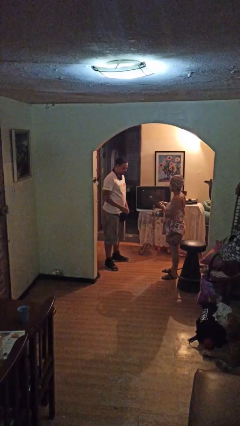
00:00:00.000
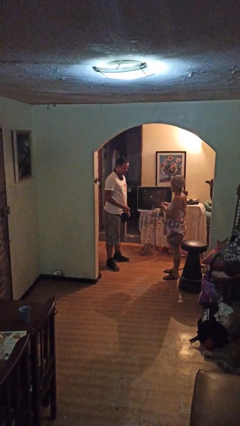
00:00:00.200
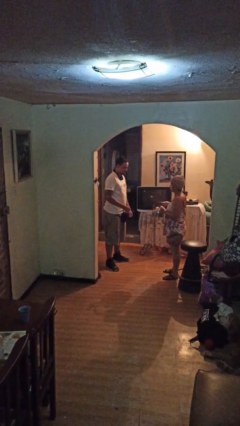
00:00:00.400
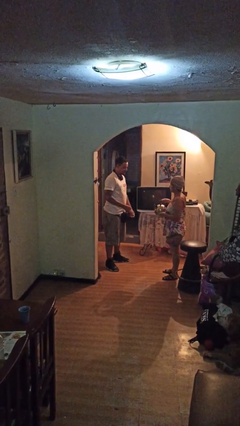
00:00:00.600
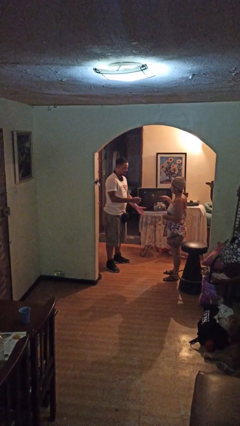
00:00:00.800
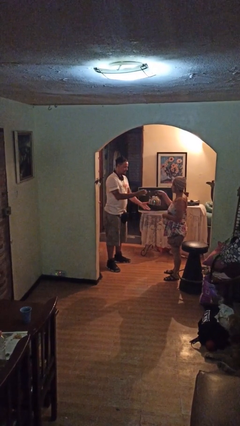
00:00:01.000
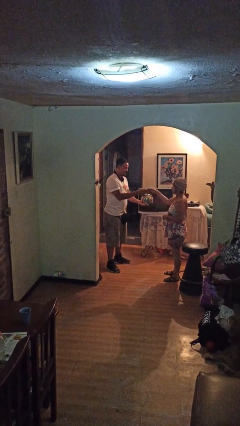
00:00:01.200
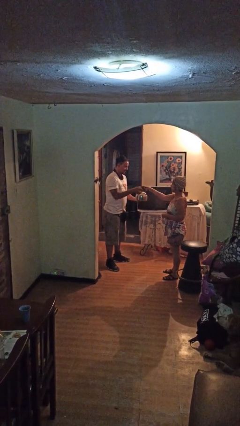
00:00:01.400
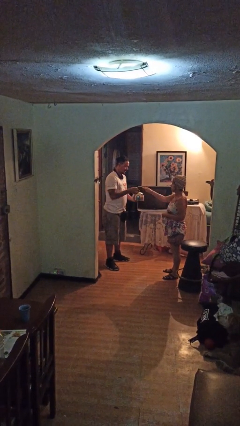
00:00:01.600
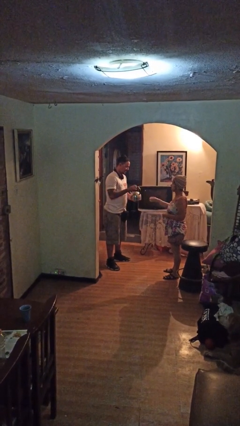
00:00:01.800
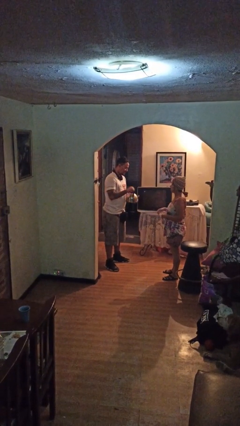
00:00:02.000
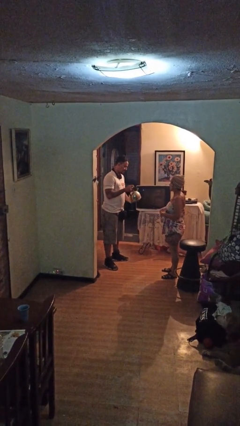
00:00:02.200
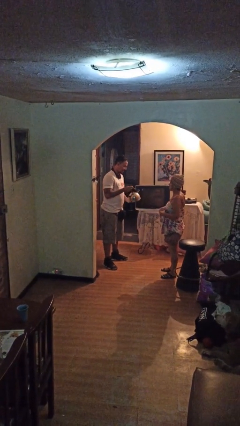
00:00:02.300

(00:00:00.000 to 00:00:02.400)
person transfers object to person

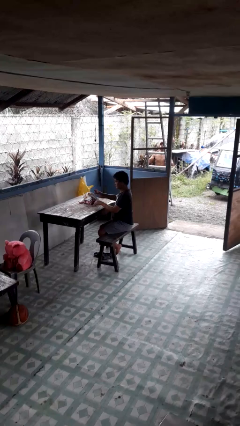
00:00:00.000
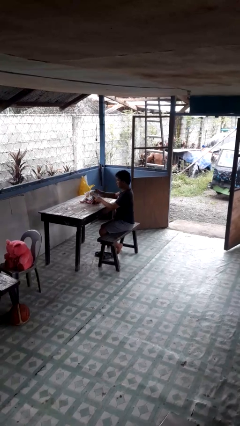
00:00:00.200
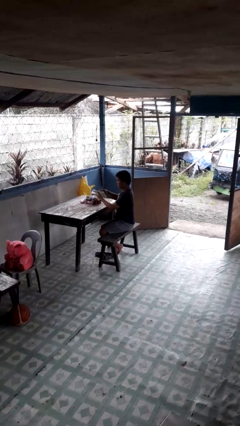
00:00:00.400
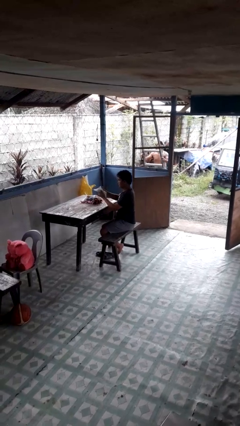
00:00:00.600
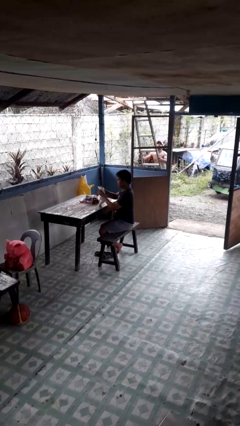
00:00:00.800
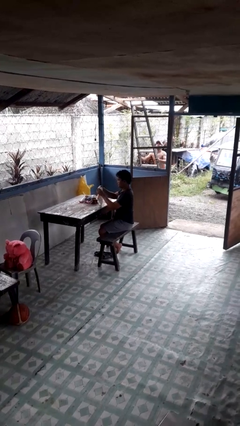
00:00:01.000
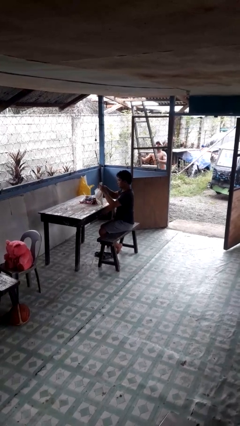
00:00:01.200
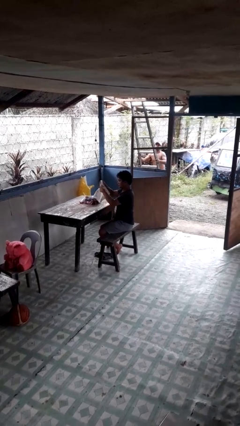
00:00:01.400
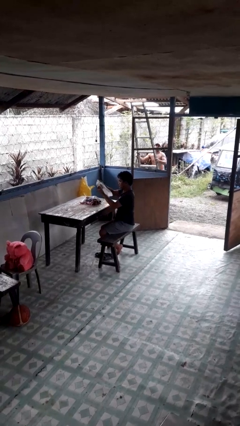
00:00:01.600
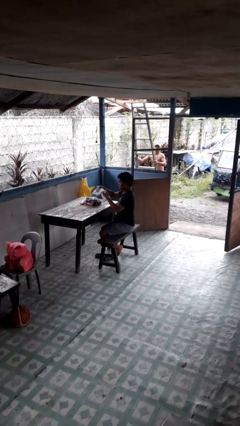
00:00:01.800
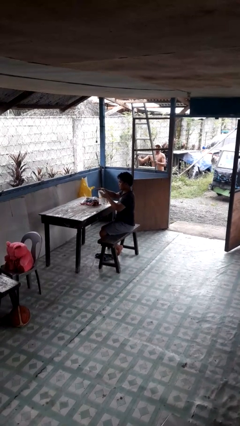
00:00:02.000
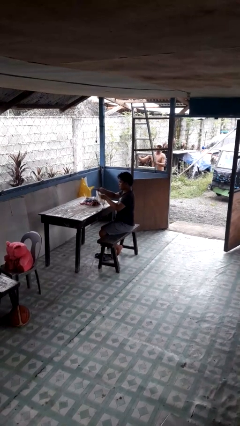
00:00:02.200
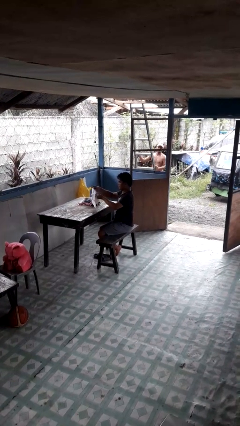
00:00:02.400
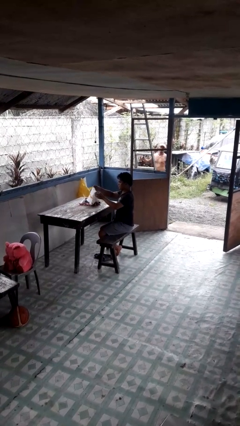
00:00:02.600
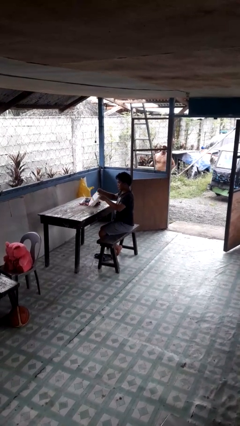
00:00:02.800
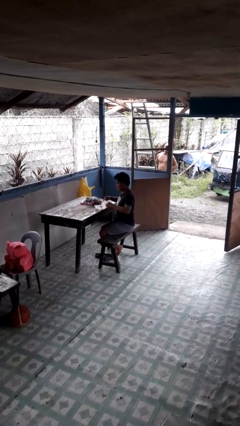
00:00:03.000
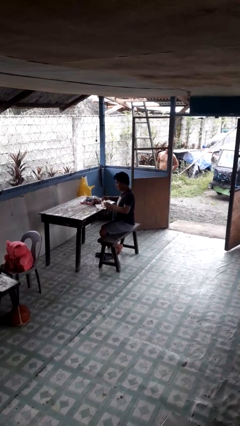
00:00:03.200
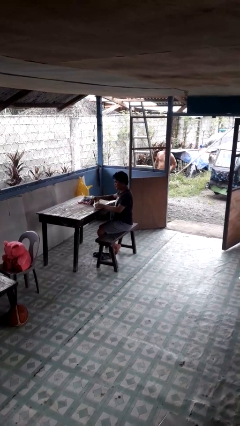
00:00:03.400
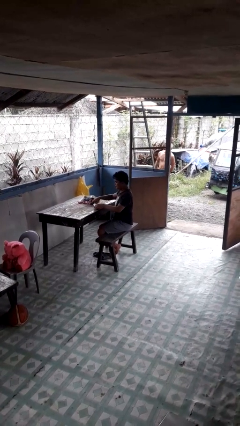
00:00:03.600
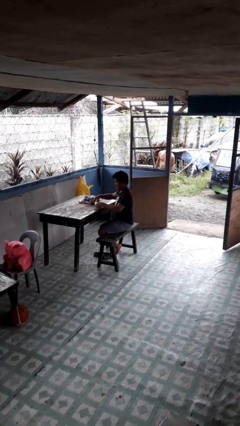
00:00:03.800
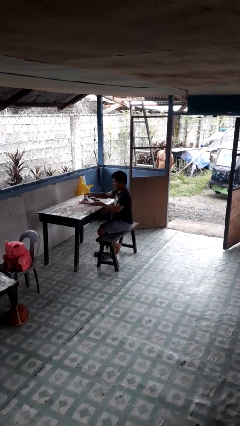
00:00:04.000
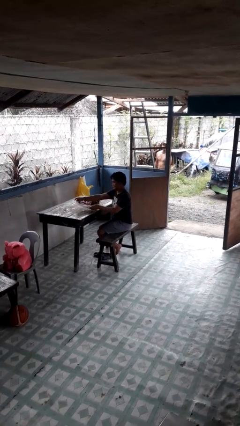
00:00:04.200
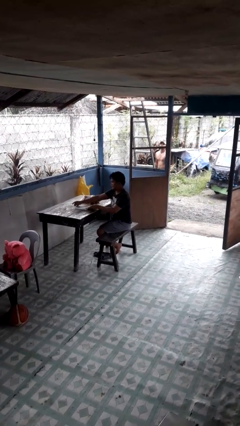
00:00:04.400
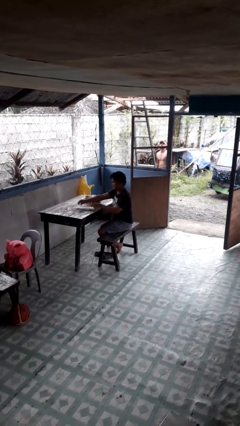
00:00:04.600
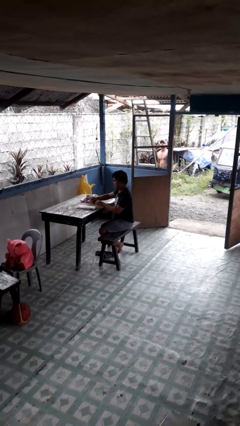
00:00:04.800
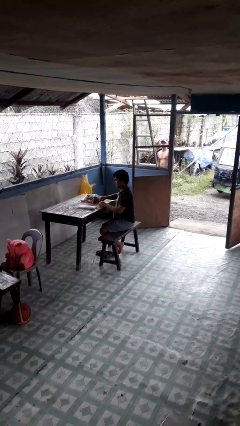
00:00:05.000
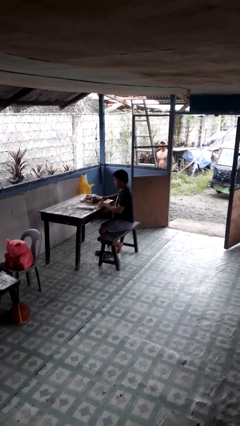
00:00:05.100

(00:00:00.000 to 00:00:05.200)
person folds towel

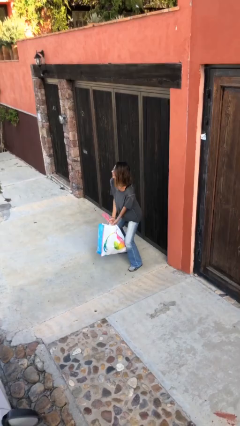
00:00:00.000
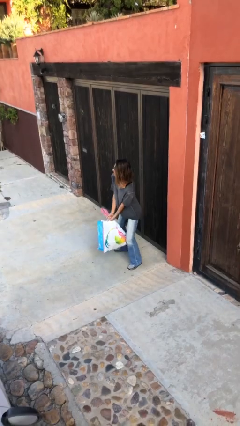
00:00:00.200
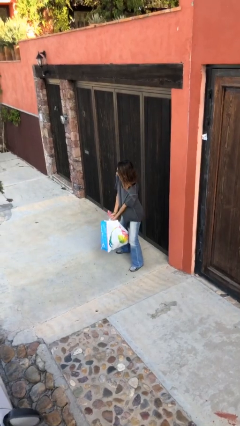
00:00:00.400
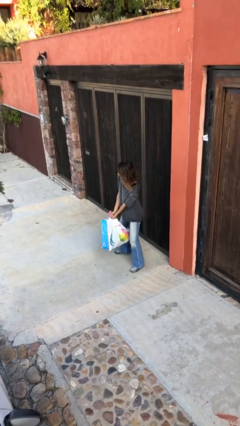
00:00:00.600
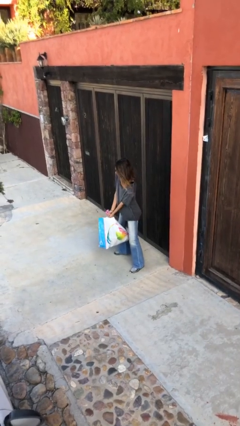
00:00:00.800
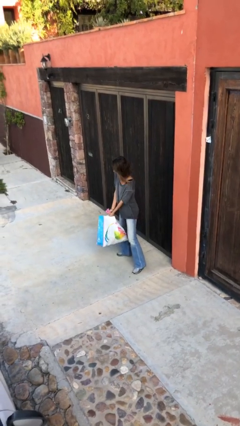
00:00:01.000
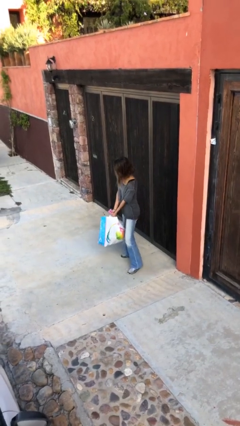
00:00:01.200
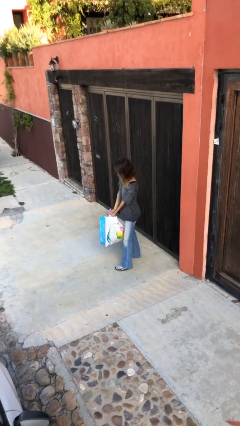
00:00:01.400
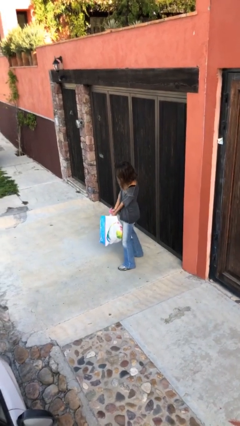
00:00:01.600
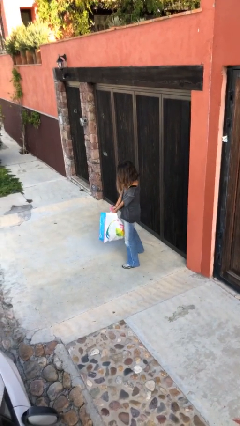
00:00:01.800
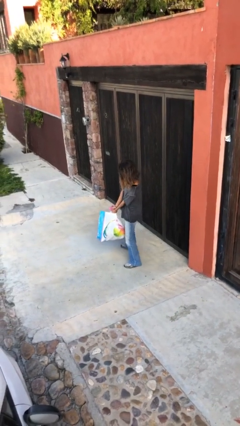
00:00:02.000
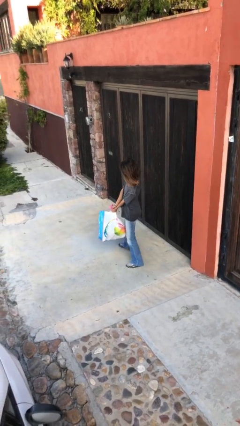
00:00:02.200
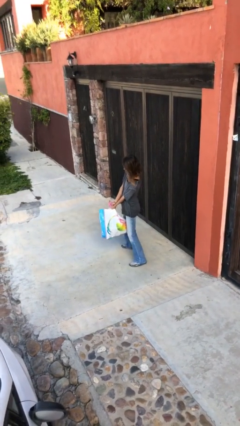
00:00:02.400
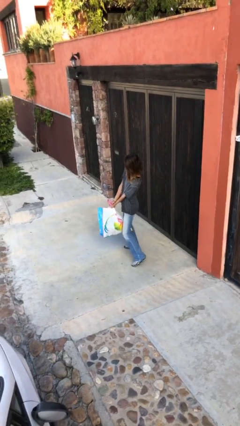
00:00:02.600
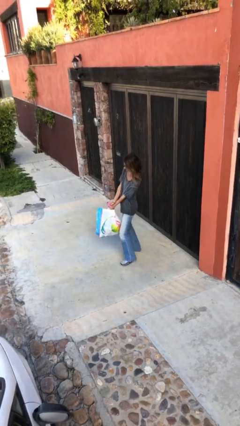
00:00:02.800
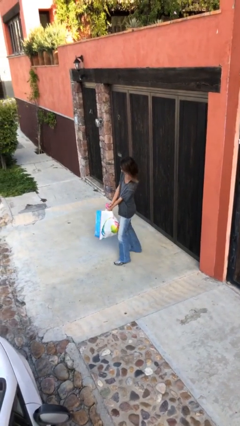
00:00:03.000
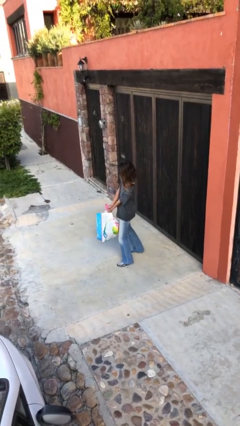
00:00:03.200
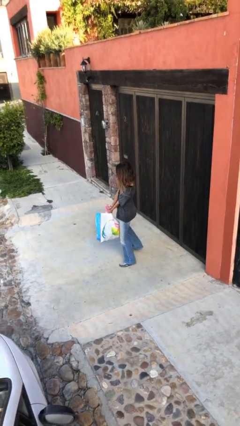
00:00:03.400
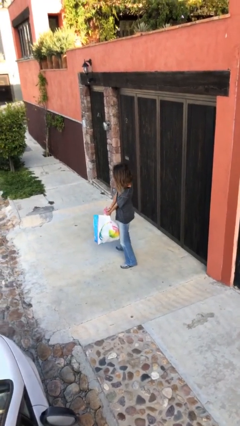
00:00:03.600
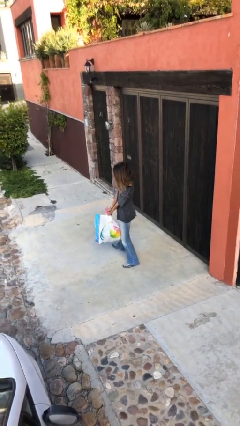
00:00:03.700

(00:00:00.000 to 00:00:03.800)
person carries heavy object

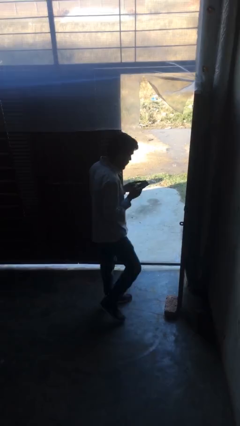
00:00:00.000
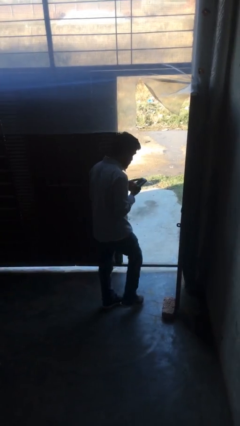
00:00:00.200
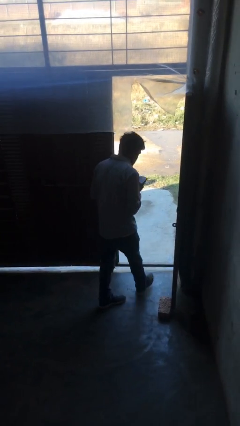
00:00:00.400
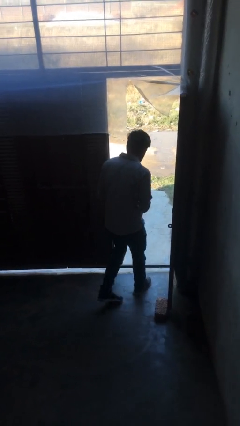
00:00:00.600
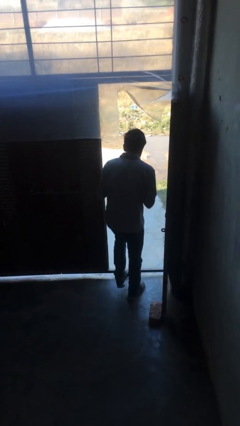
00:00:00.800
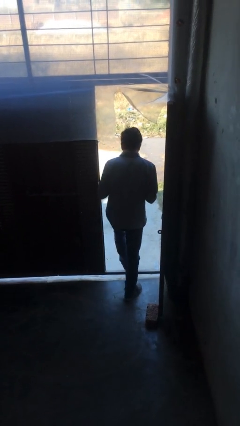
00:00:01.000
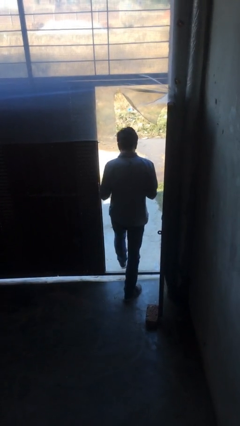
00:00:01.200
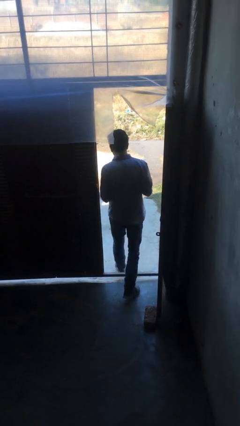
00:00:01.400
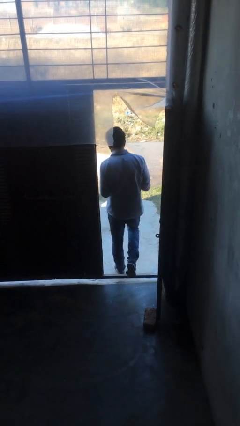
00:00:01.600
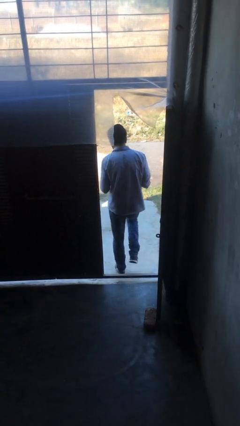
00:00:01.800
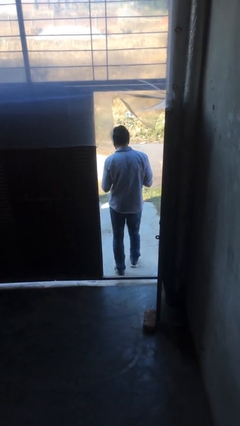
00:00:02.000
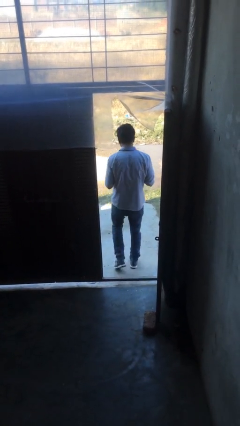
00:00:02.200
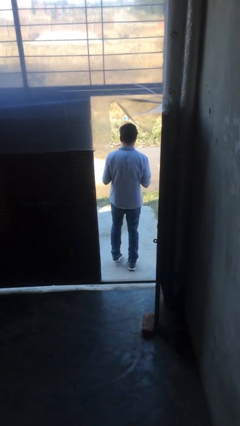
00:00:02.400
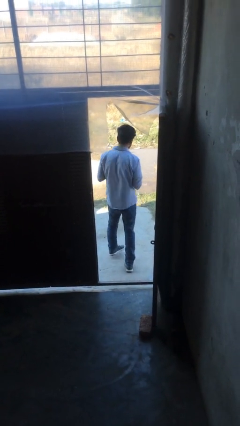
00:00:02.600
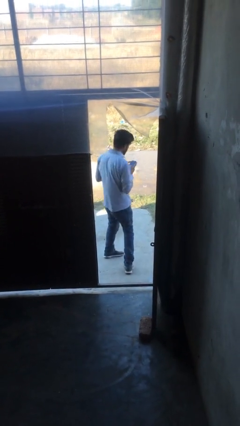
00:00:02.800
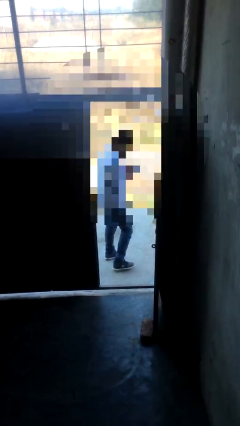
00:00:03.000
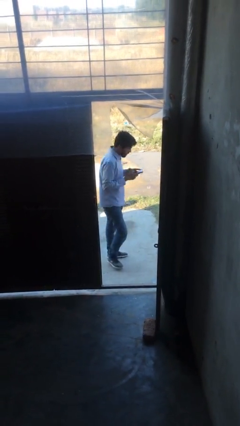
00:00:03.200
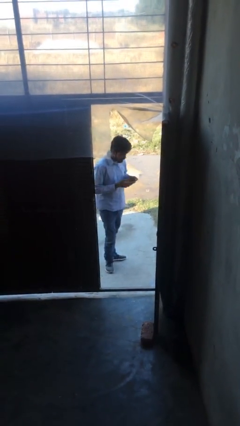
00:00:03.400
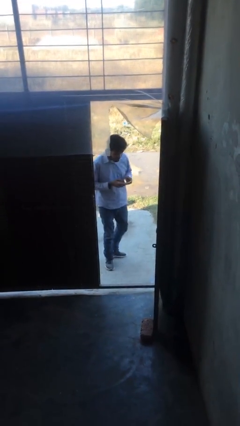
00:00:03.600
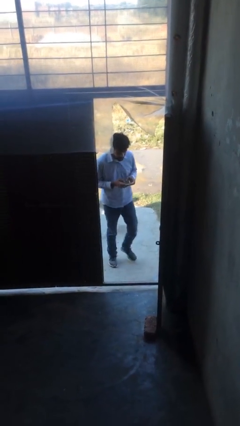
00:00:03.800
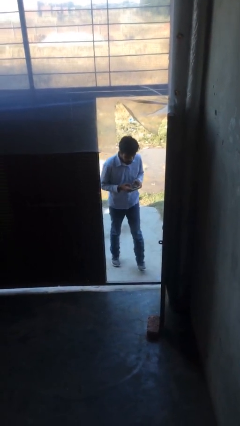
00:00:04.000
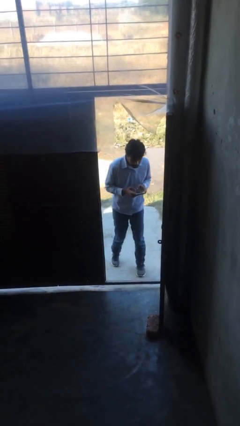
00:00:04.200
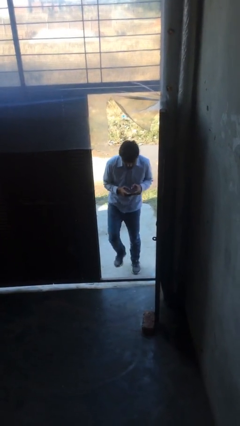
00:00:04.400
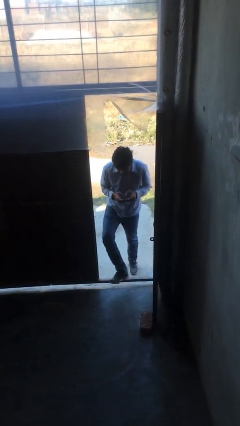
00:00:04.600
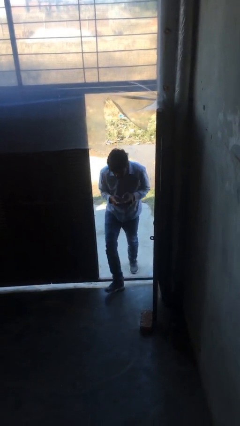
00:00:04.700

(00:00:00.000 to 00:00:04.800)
person exits scene through structure

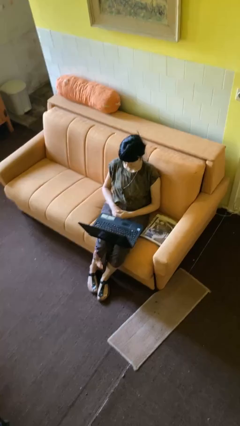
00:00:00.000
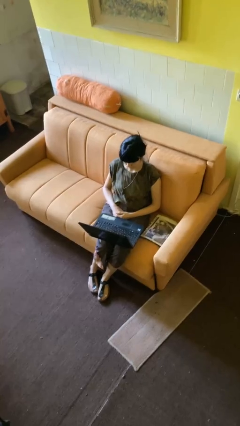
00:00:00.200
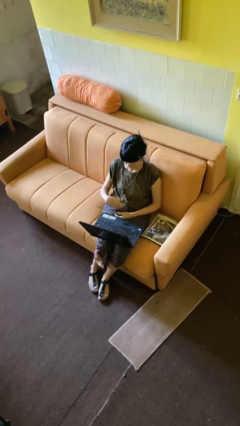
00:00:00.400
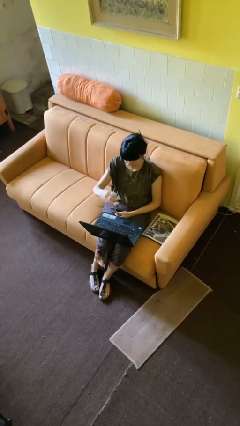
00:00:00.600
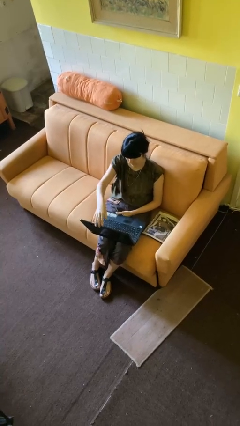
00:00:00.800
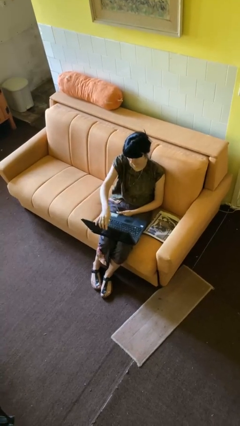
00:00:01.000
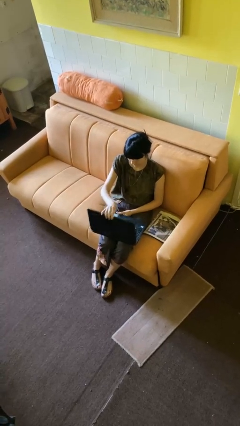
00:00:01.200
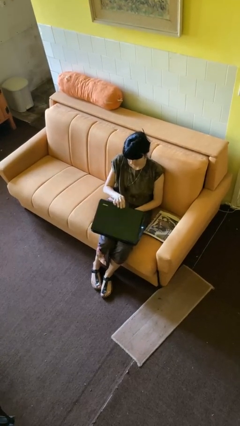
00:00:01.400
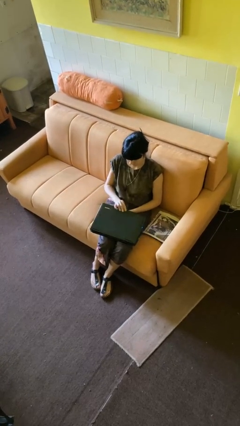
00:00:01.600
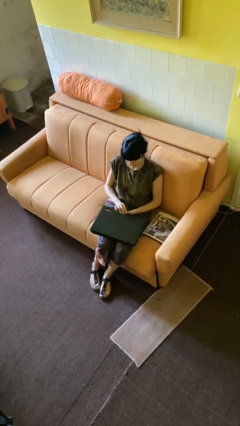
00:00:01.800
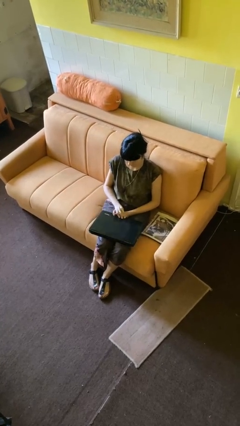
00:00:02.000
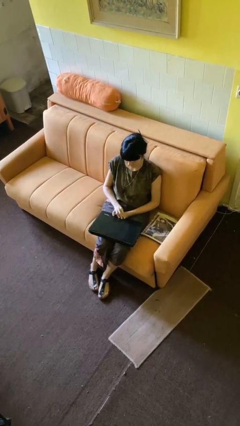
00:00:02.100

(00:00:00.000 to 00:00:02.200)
person closes laptop
